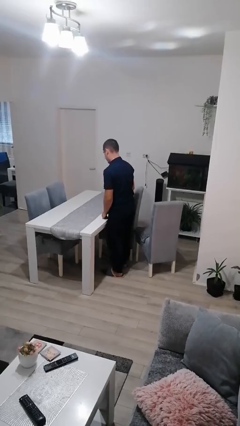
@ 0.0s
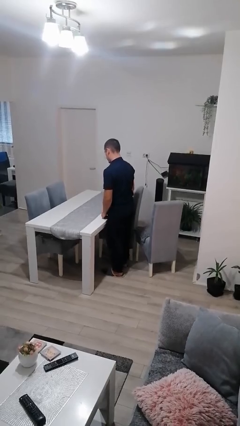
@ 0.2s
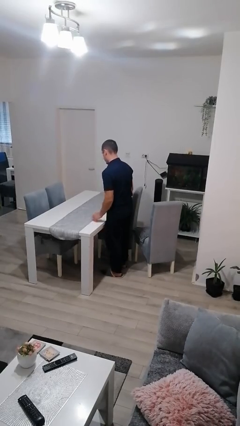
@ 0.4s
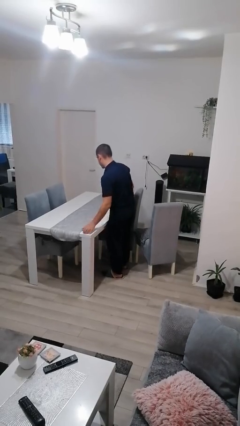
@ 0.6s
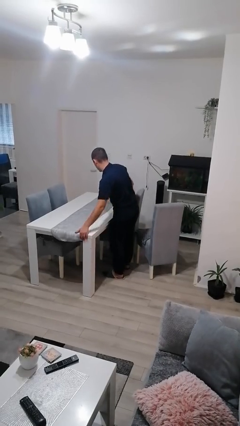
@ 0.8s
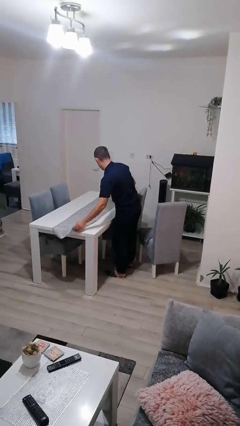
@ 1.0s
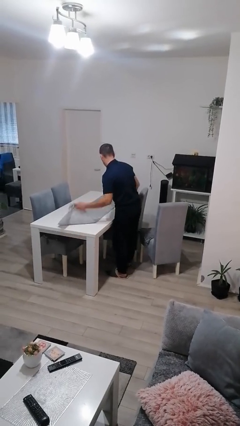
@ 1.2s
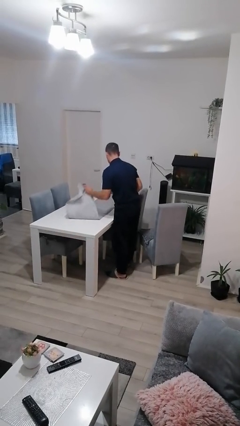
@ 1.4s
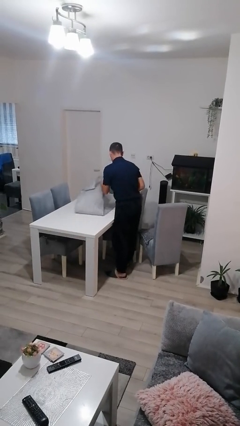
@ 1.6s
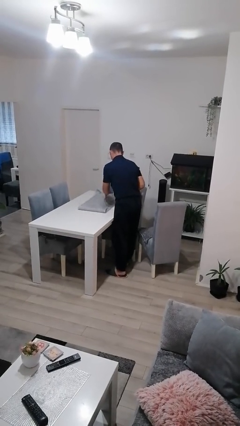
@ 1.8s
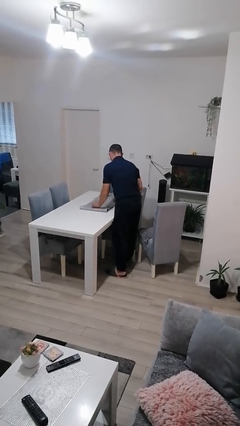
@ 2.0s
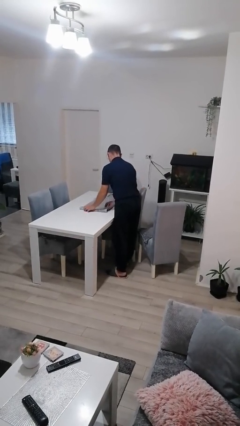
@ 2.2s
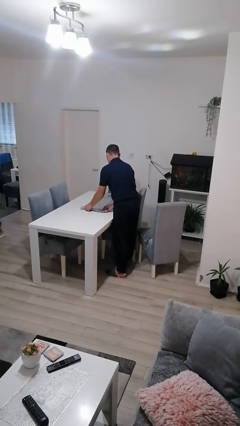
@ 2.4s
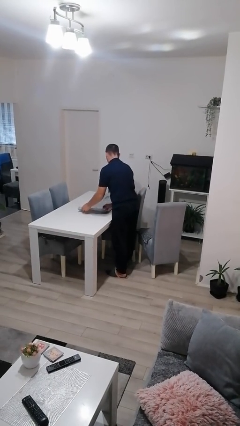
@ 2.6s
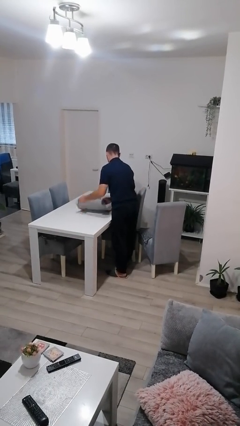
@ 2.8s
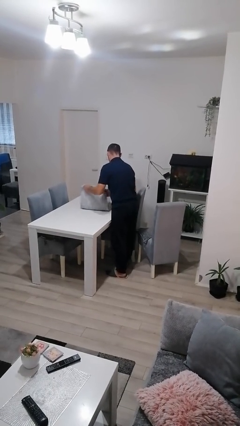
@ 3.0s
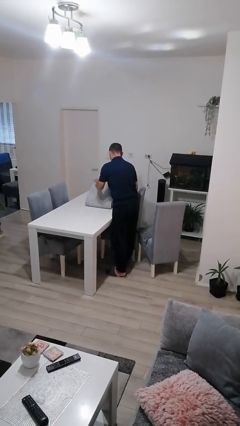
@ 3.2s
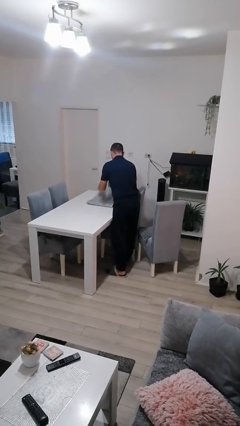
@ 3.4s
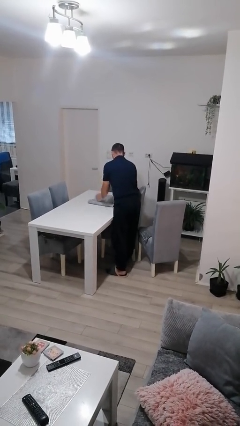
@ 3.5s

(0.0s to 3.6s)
person folds tablecloth

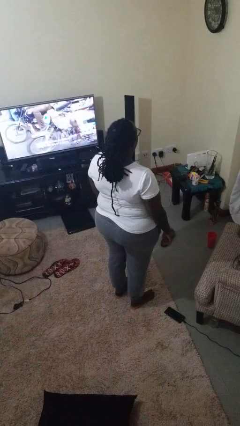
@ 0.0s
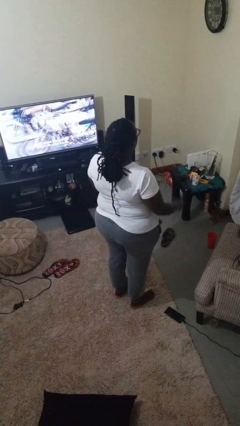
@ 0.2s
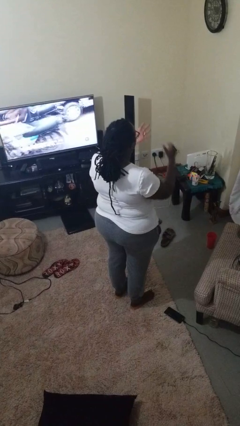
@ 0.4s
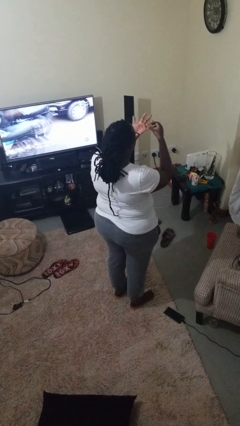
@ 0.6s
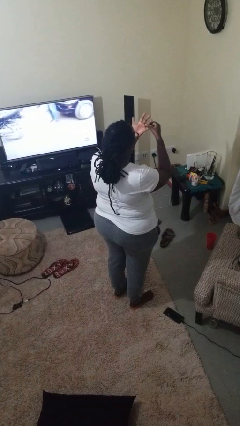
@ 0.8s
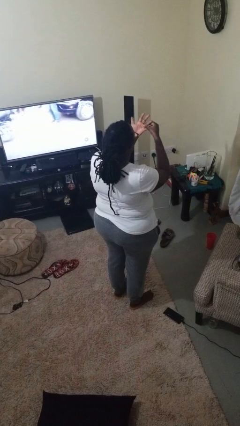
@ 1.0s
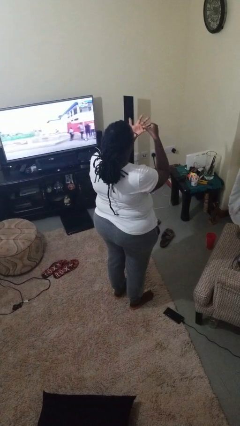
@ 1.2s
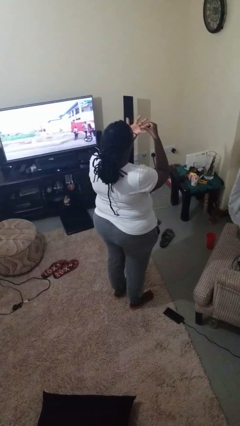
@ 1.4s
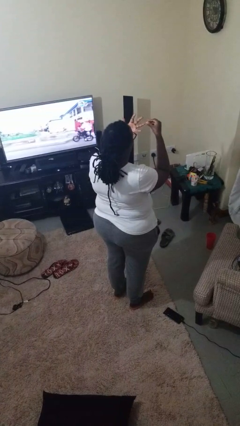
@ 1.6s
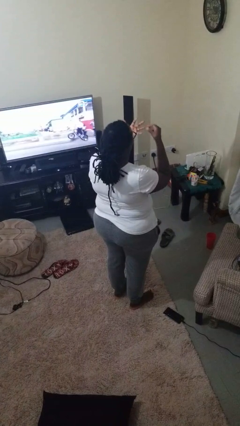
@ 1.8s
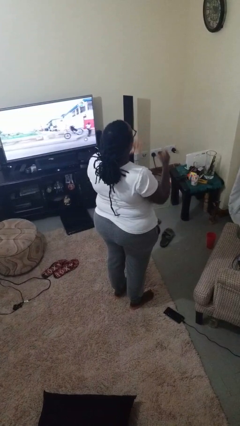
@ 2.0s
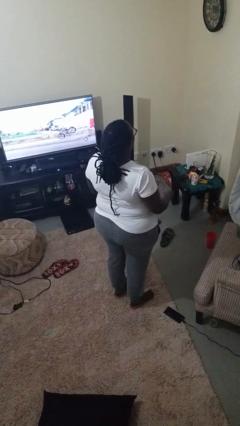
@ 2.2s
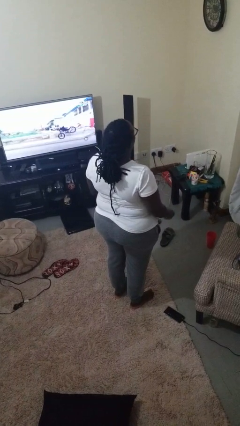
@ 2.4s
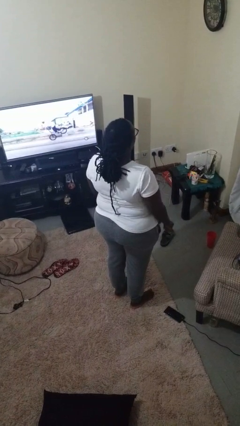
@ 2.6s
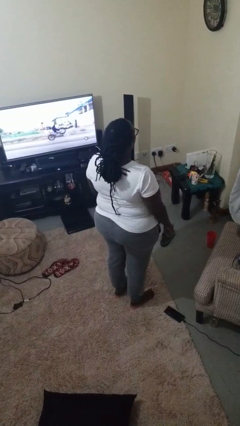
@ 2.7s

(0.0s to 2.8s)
person takes off ring

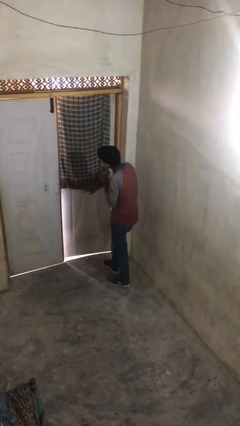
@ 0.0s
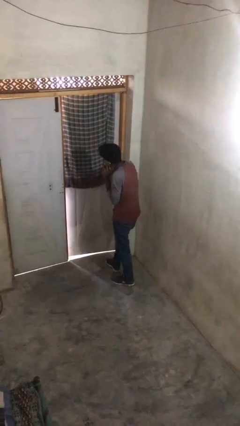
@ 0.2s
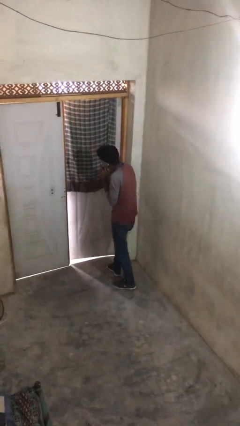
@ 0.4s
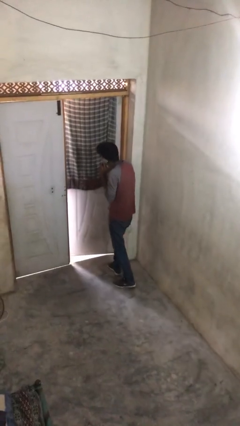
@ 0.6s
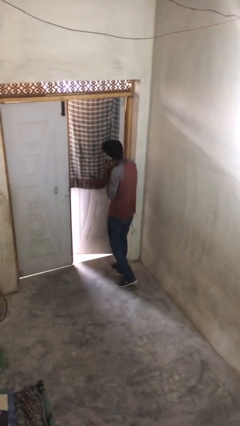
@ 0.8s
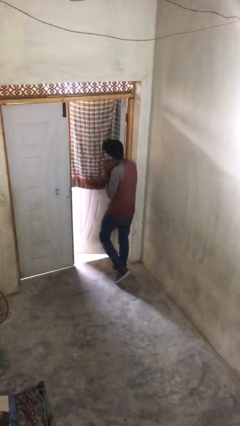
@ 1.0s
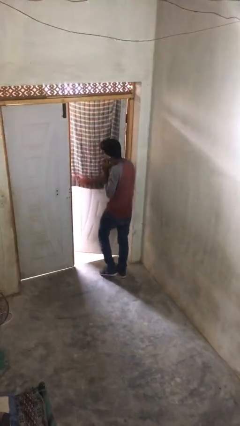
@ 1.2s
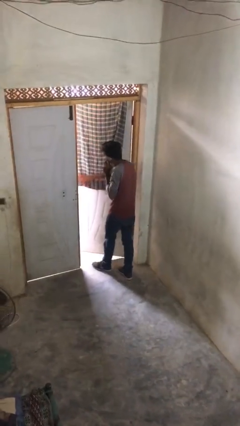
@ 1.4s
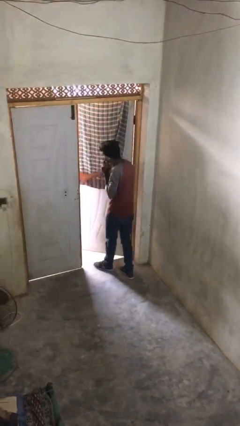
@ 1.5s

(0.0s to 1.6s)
person opens facility door

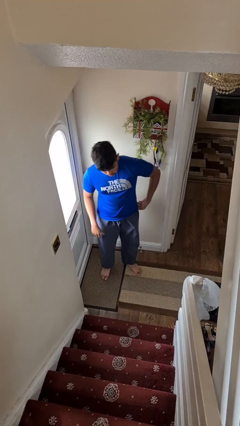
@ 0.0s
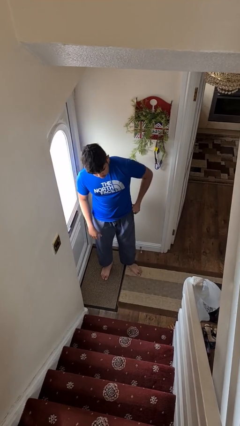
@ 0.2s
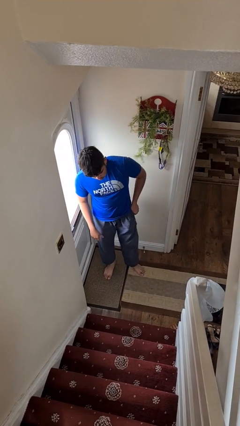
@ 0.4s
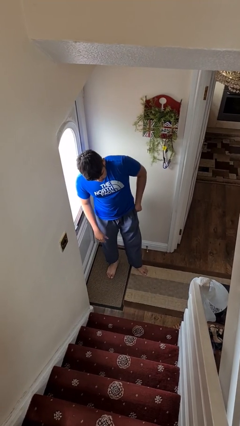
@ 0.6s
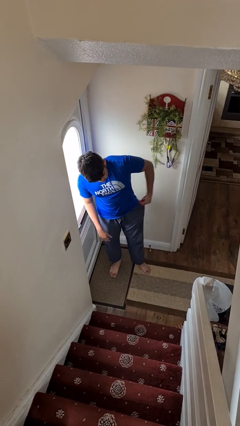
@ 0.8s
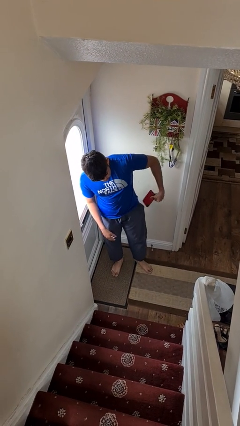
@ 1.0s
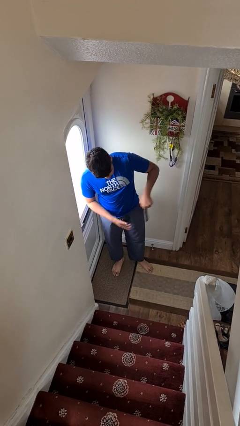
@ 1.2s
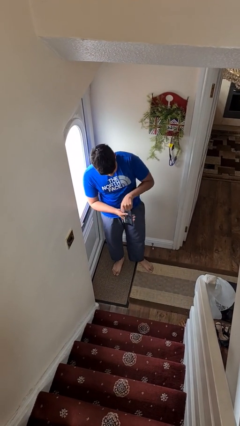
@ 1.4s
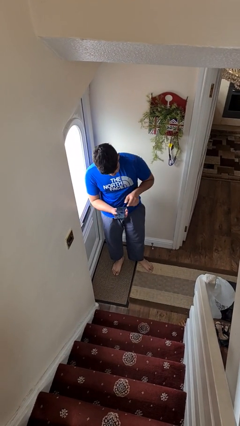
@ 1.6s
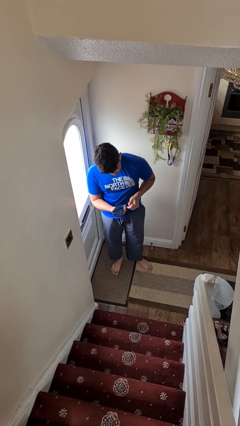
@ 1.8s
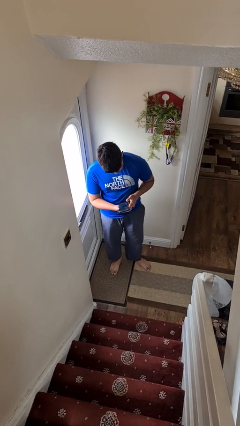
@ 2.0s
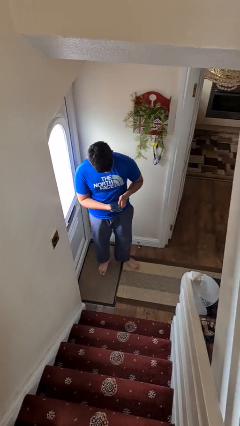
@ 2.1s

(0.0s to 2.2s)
person takes phone from pocket

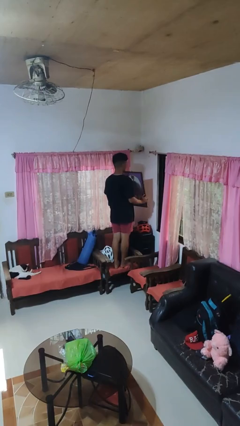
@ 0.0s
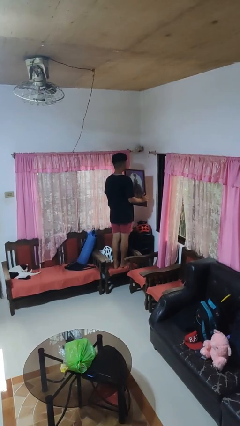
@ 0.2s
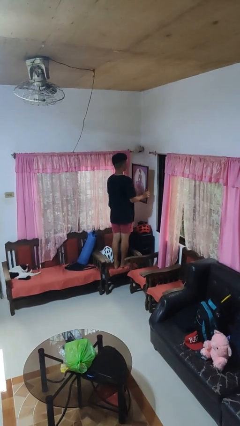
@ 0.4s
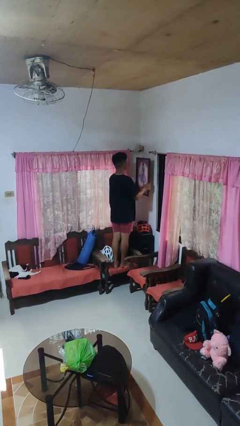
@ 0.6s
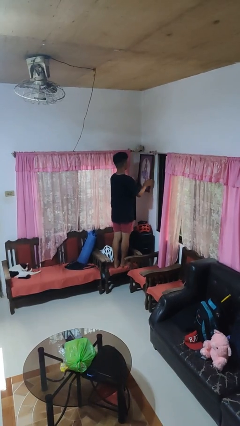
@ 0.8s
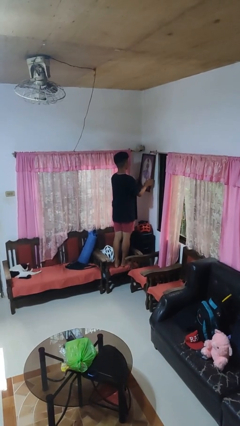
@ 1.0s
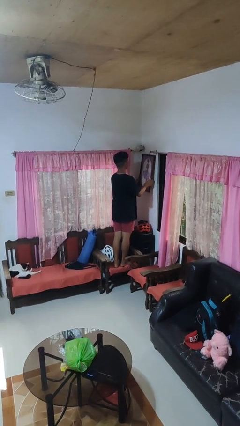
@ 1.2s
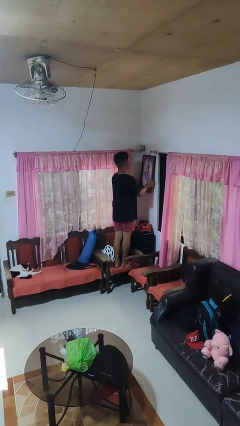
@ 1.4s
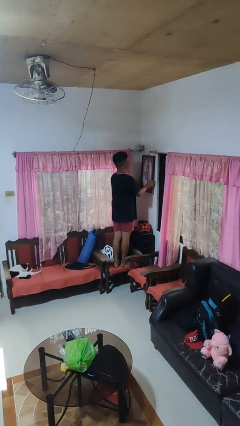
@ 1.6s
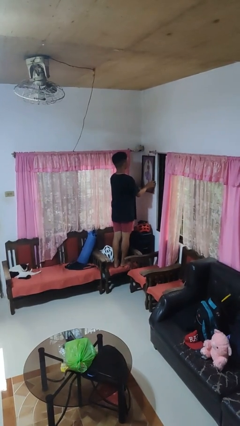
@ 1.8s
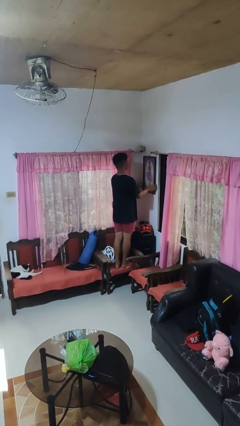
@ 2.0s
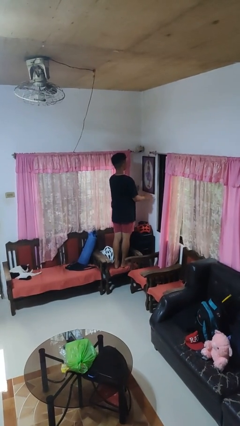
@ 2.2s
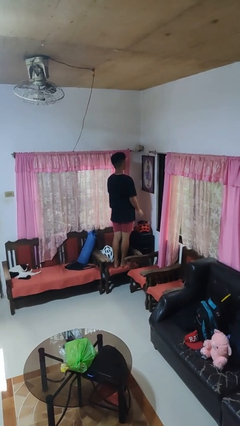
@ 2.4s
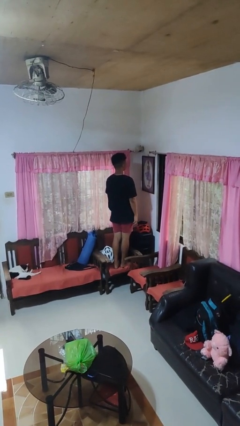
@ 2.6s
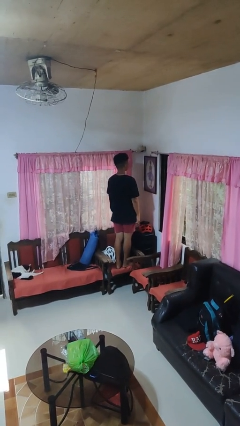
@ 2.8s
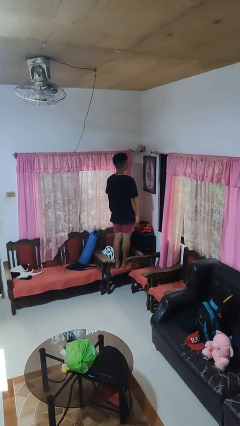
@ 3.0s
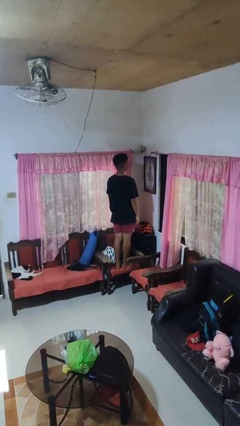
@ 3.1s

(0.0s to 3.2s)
person puts up picture frame

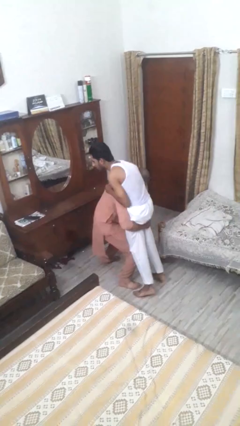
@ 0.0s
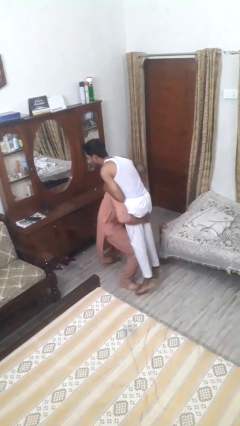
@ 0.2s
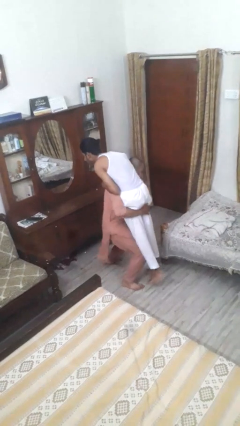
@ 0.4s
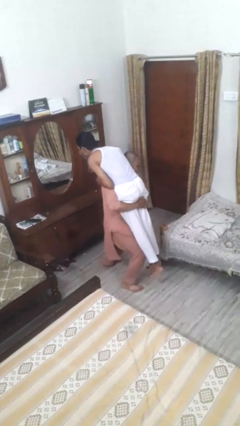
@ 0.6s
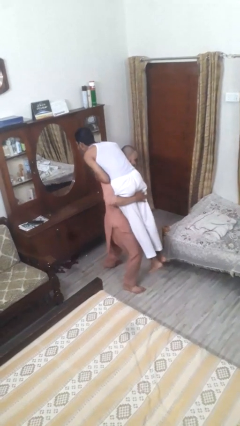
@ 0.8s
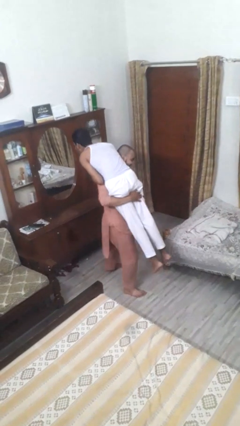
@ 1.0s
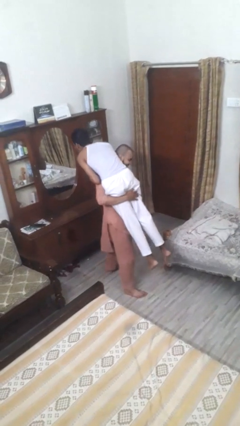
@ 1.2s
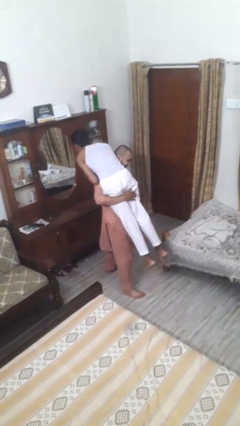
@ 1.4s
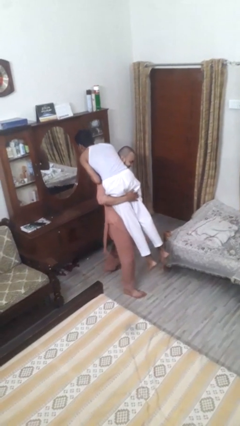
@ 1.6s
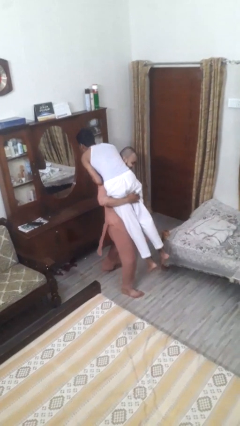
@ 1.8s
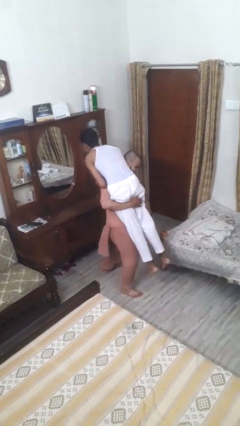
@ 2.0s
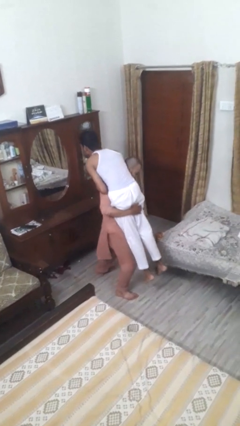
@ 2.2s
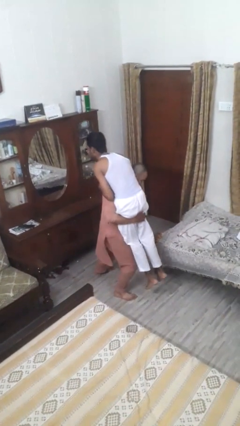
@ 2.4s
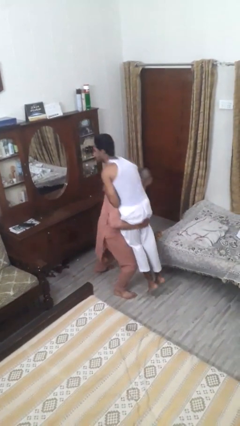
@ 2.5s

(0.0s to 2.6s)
person carries person over shoulder

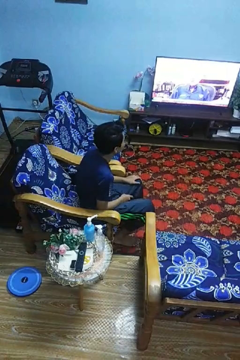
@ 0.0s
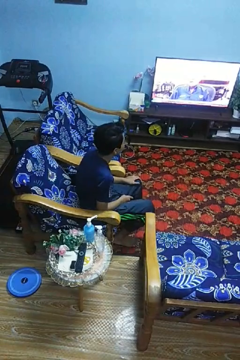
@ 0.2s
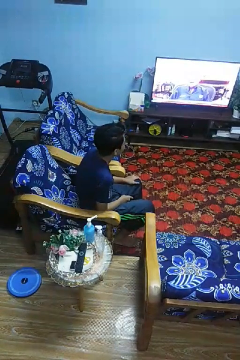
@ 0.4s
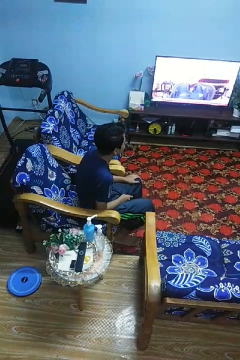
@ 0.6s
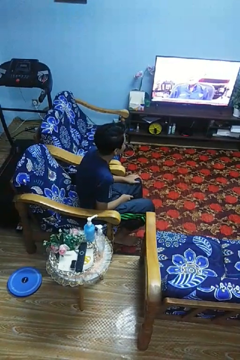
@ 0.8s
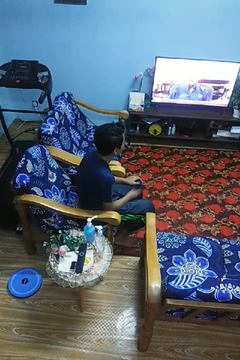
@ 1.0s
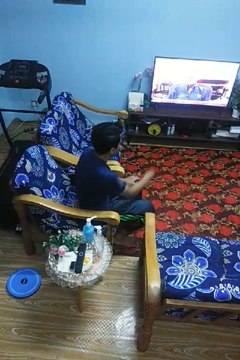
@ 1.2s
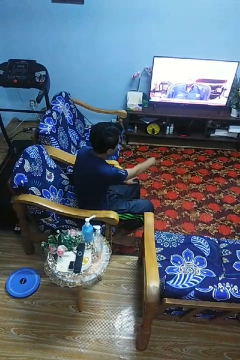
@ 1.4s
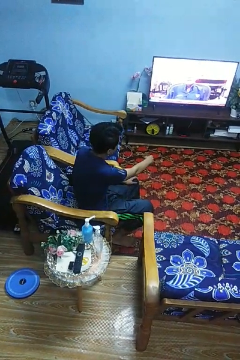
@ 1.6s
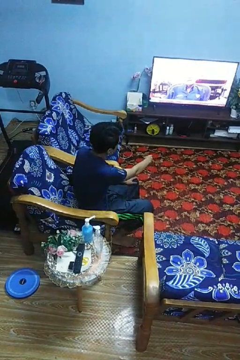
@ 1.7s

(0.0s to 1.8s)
person uses television remote
